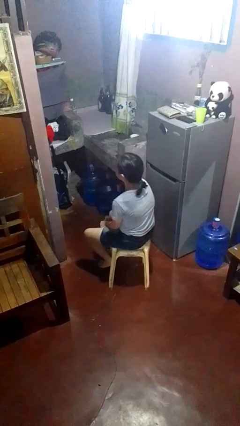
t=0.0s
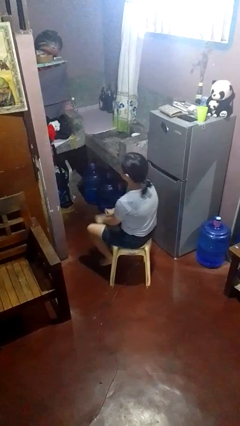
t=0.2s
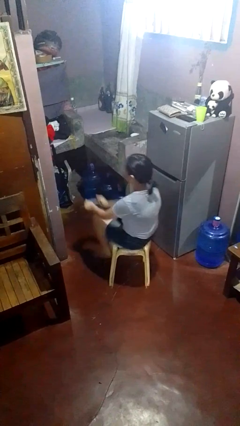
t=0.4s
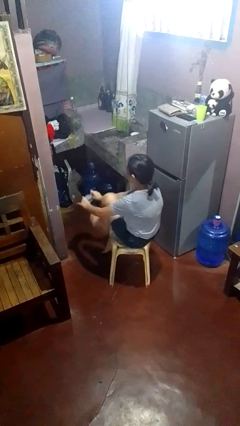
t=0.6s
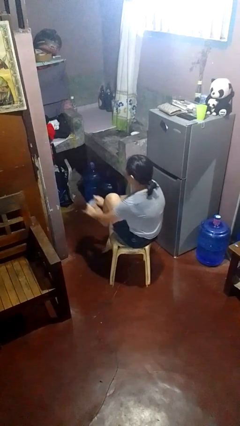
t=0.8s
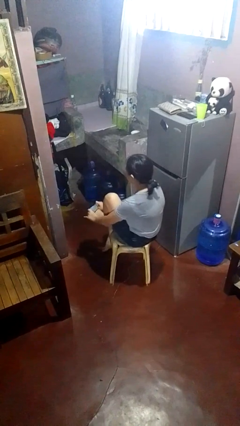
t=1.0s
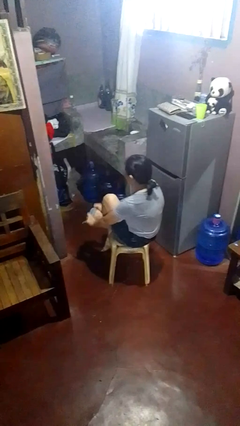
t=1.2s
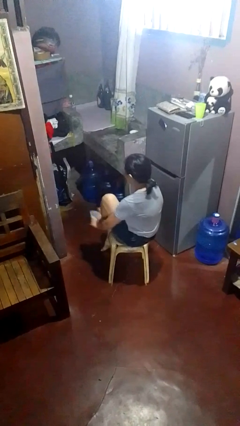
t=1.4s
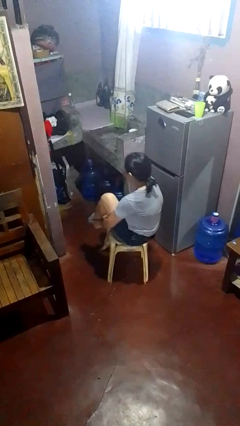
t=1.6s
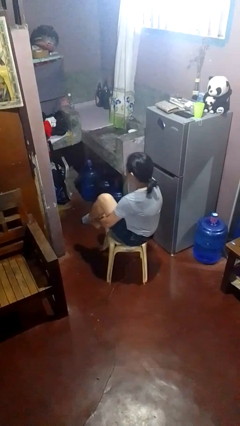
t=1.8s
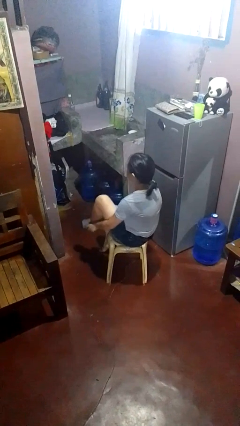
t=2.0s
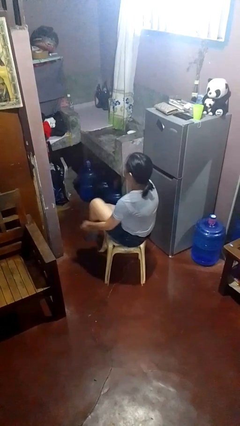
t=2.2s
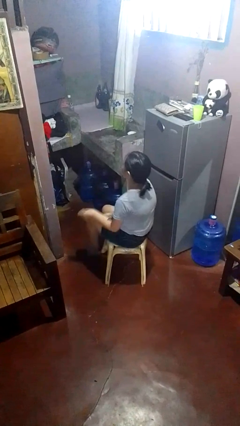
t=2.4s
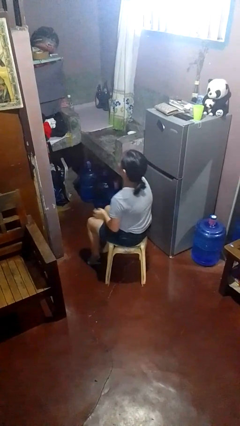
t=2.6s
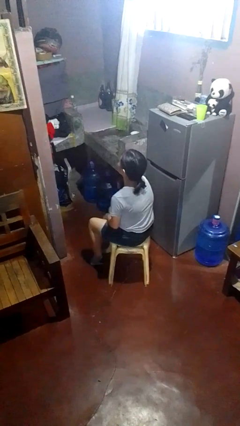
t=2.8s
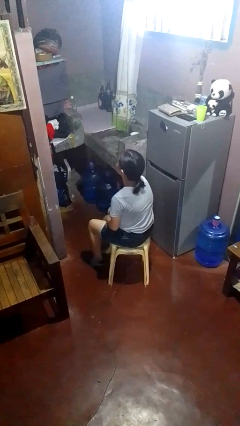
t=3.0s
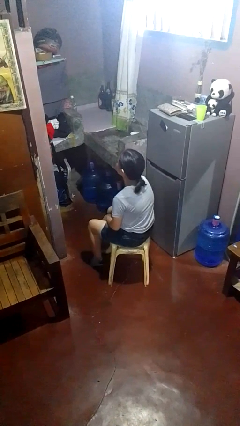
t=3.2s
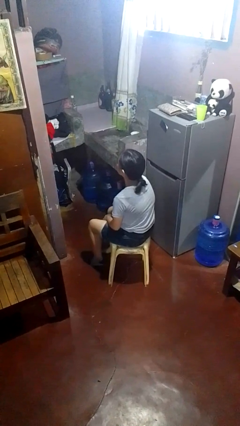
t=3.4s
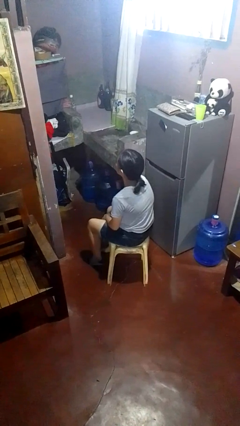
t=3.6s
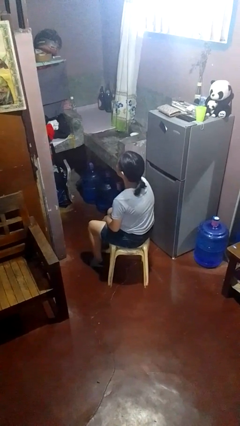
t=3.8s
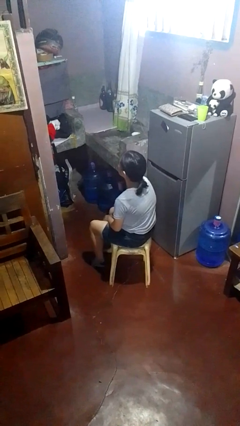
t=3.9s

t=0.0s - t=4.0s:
person puts on socks

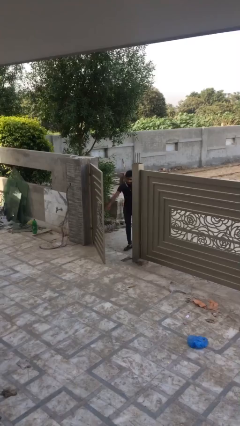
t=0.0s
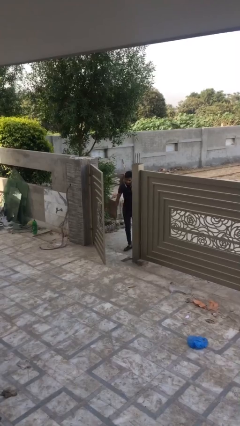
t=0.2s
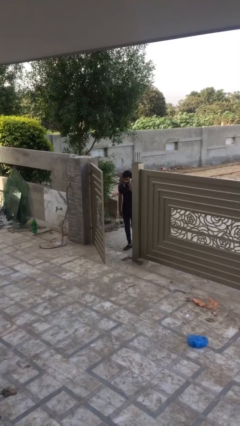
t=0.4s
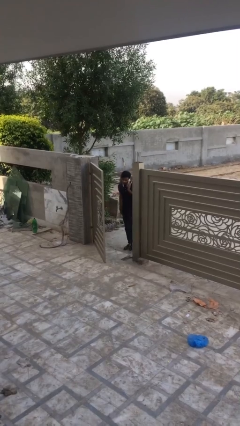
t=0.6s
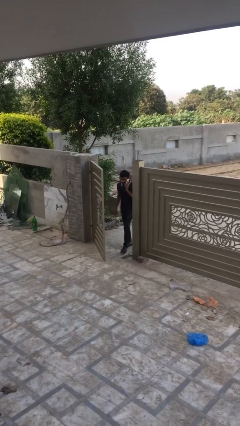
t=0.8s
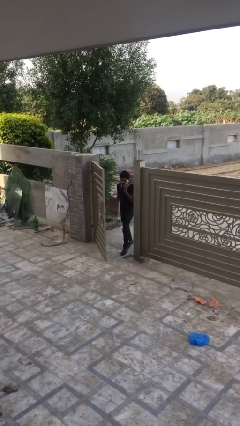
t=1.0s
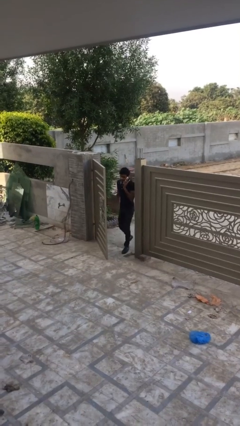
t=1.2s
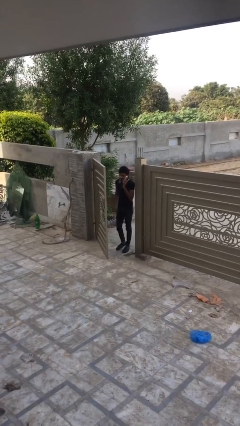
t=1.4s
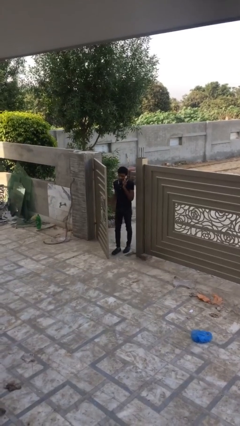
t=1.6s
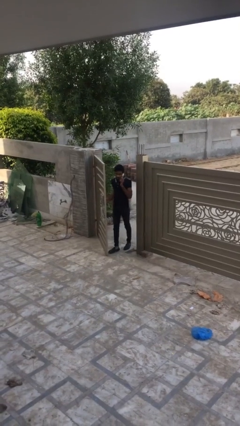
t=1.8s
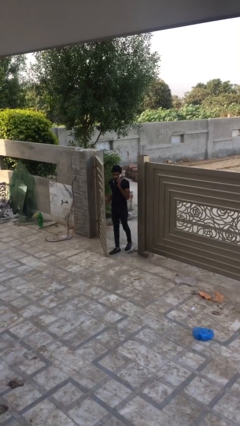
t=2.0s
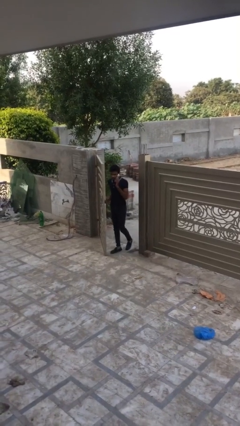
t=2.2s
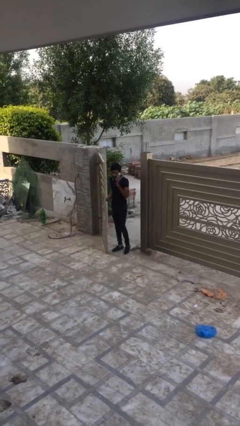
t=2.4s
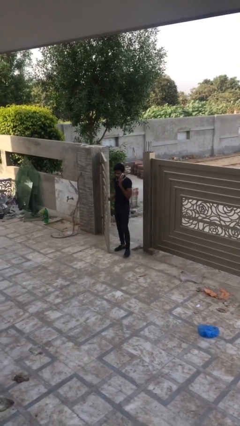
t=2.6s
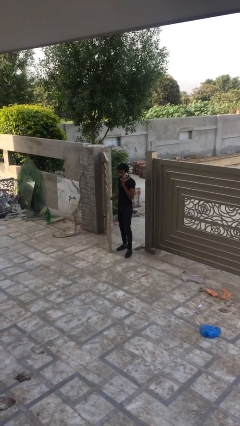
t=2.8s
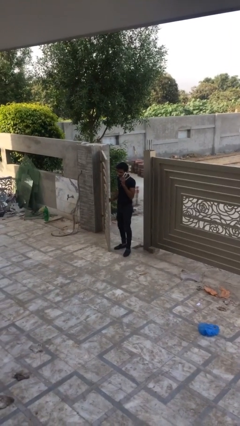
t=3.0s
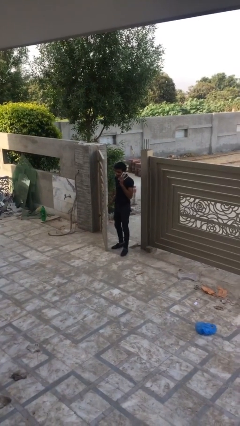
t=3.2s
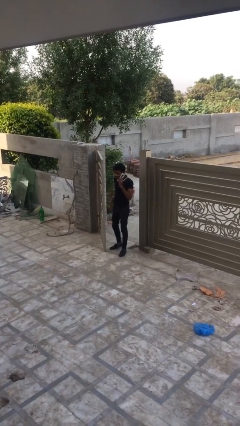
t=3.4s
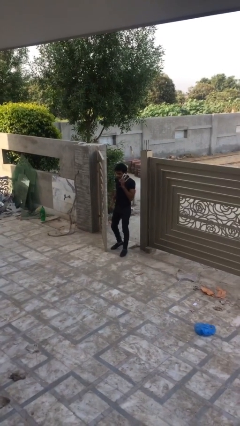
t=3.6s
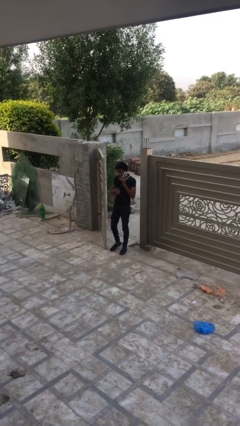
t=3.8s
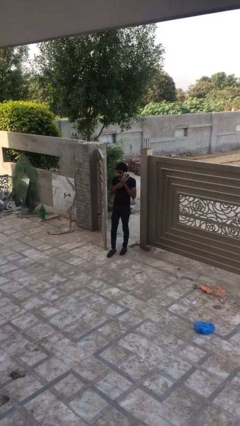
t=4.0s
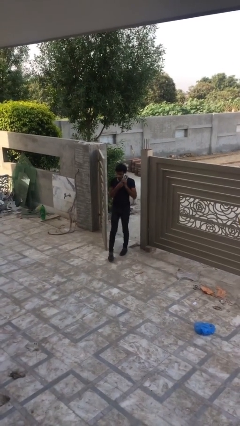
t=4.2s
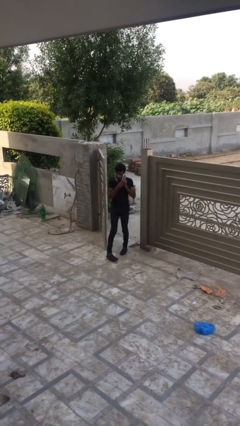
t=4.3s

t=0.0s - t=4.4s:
person enters scene through structure

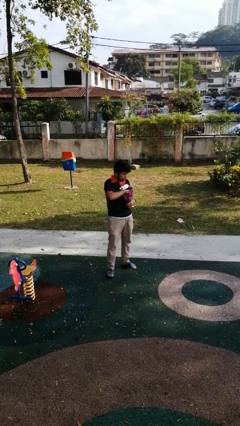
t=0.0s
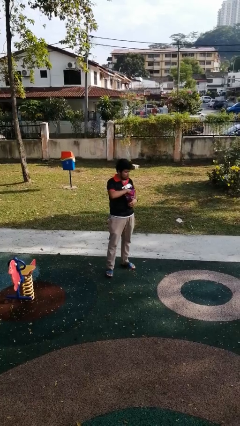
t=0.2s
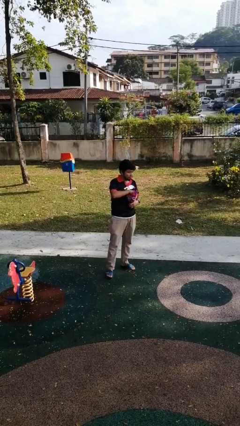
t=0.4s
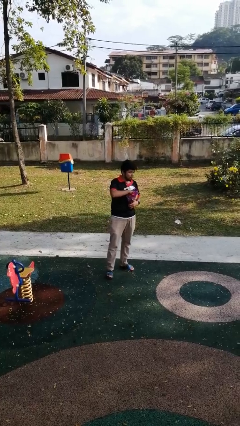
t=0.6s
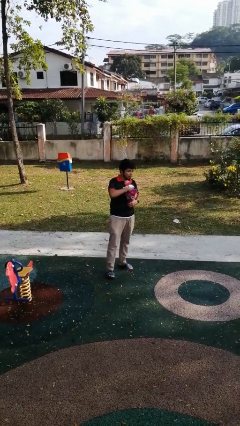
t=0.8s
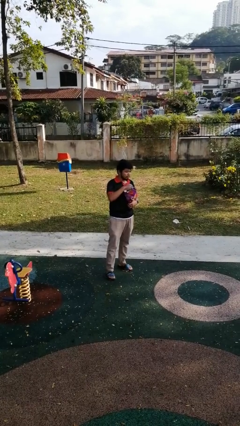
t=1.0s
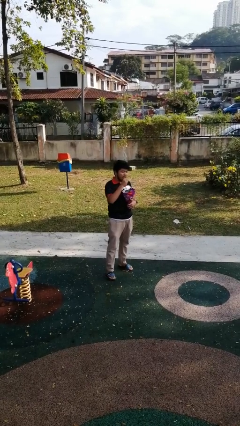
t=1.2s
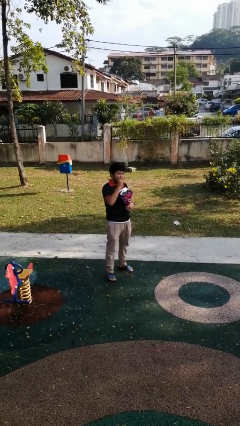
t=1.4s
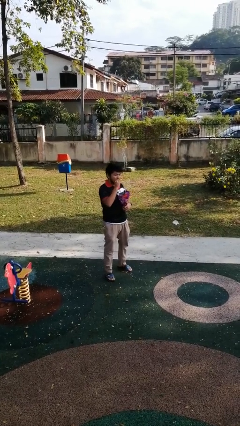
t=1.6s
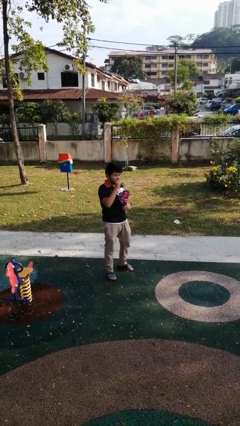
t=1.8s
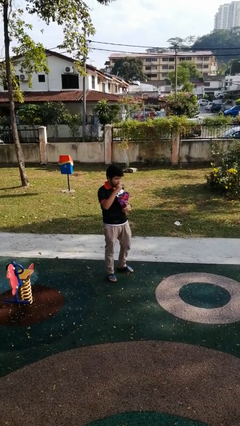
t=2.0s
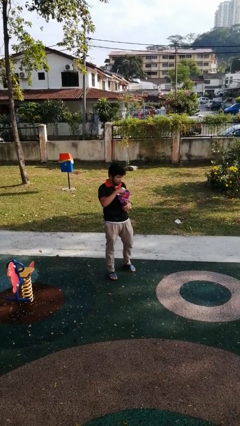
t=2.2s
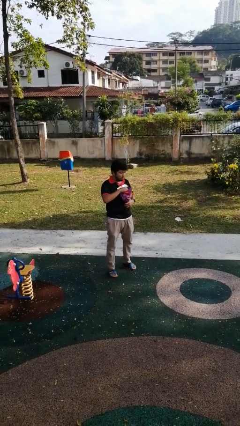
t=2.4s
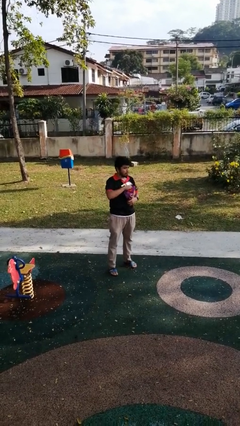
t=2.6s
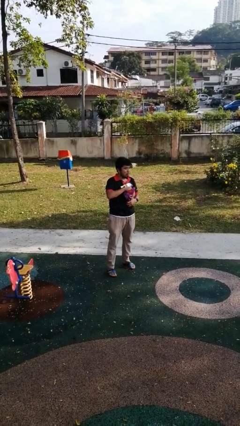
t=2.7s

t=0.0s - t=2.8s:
person eats snack from bag

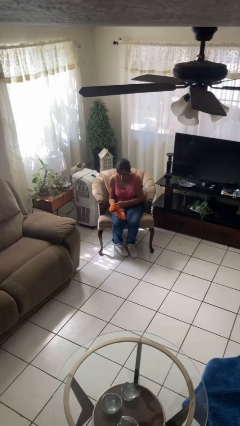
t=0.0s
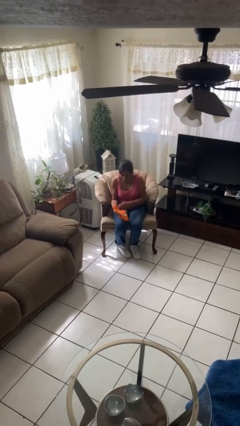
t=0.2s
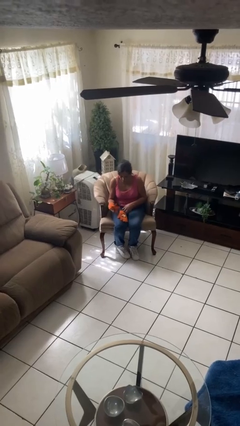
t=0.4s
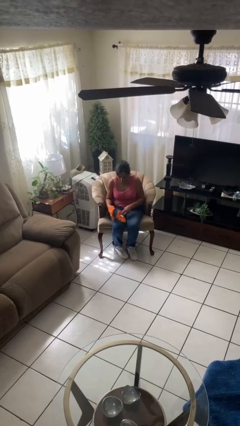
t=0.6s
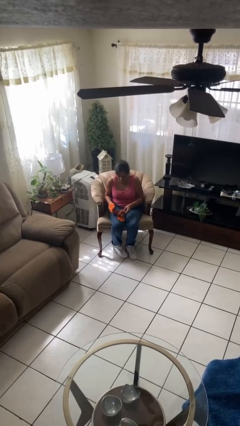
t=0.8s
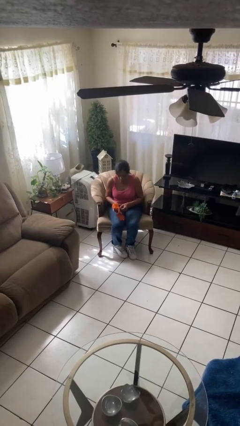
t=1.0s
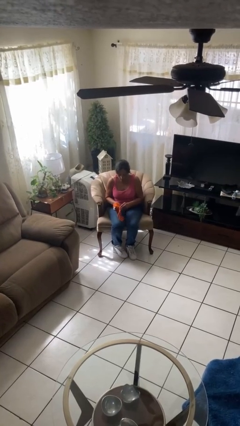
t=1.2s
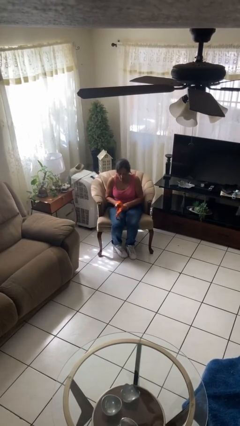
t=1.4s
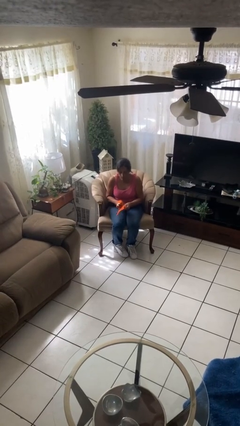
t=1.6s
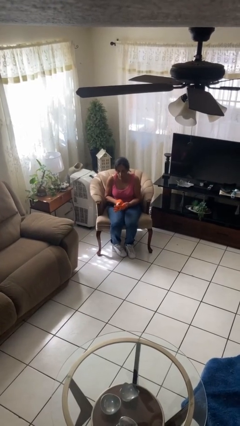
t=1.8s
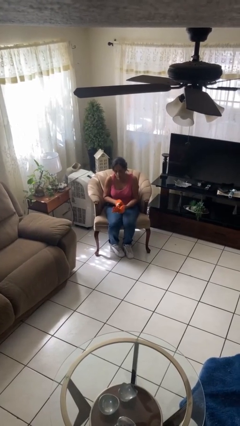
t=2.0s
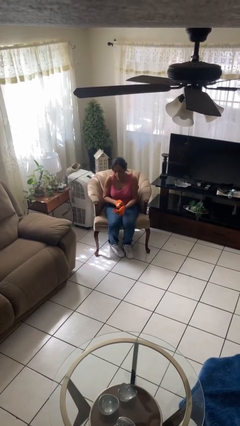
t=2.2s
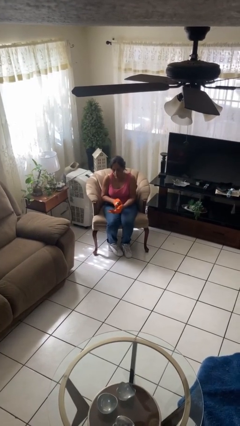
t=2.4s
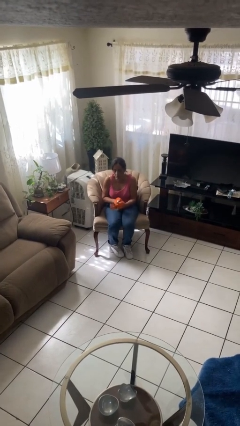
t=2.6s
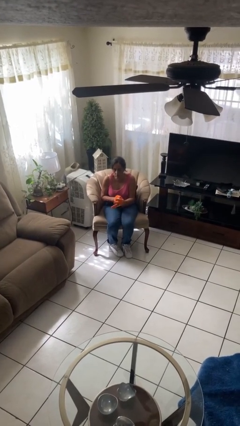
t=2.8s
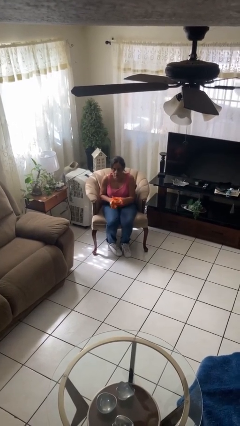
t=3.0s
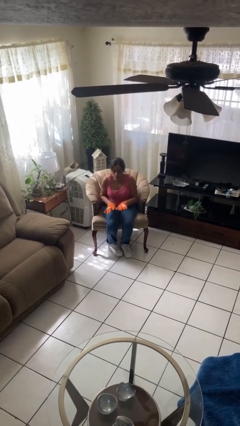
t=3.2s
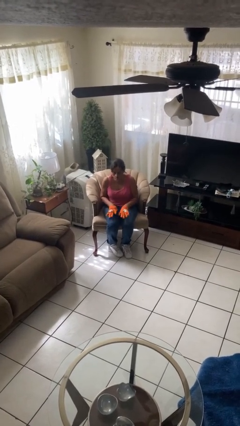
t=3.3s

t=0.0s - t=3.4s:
person puts on gloves

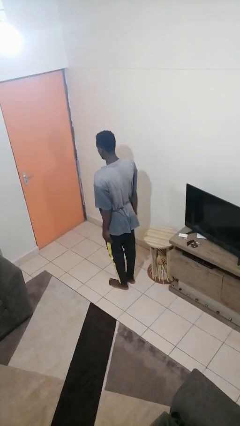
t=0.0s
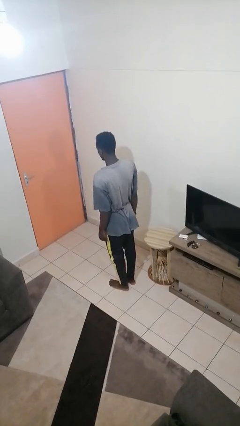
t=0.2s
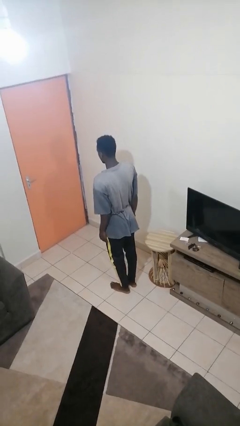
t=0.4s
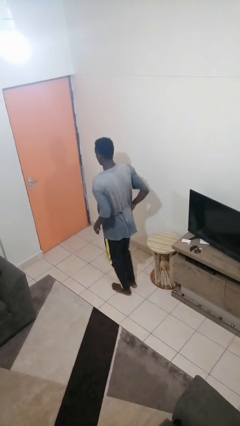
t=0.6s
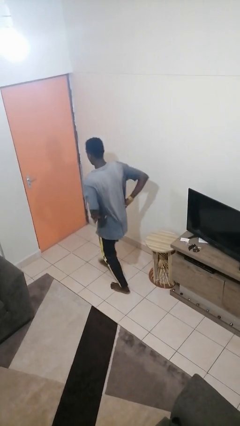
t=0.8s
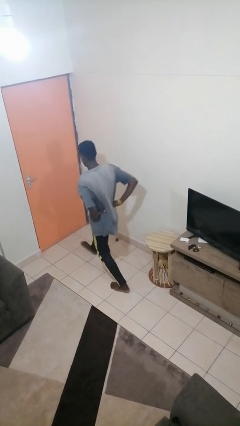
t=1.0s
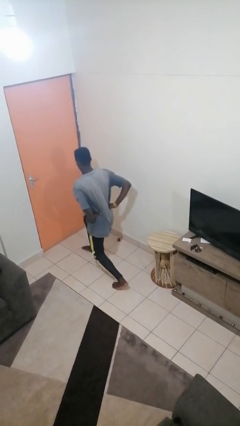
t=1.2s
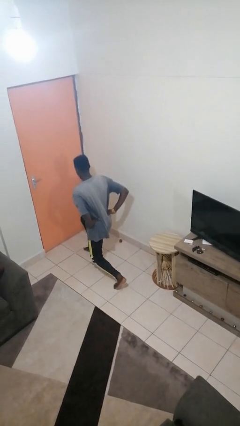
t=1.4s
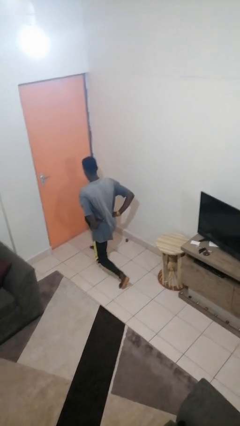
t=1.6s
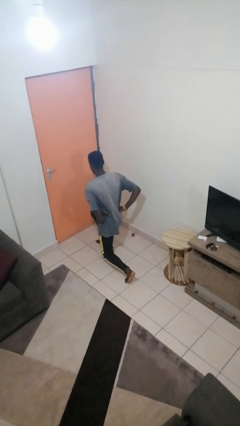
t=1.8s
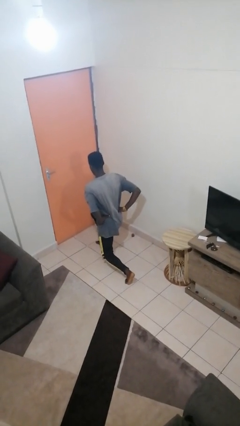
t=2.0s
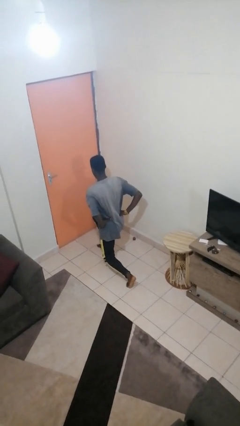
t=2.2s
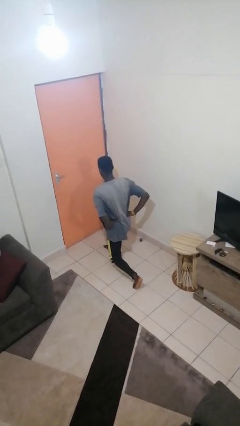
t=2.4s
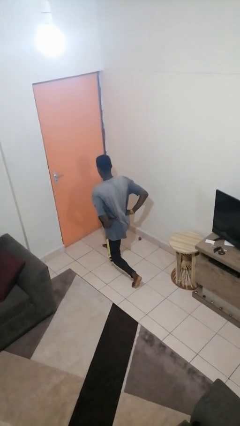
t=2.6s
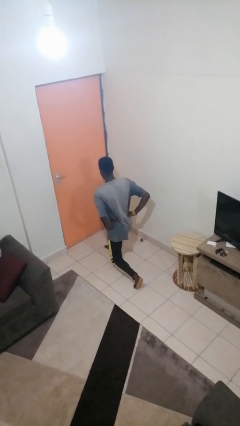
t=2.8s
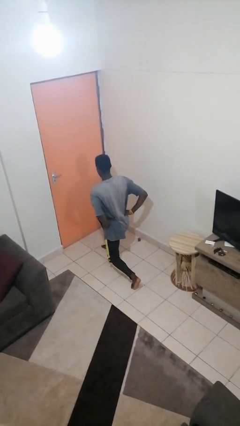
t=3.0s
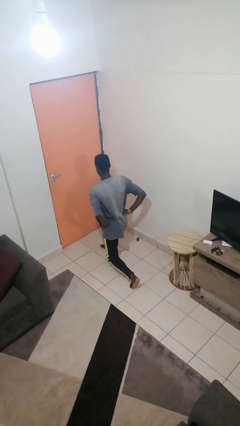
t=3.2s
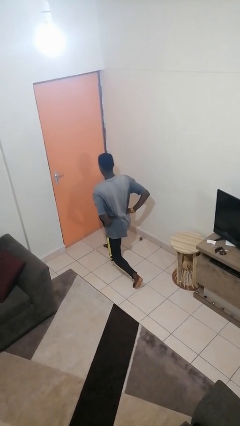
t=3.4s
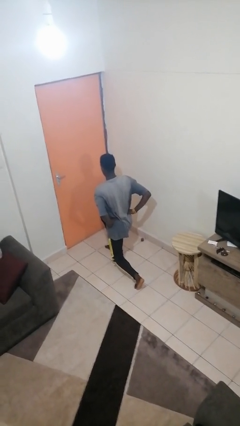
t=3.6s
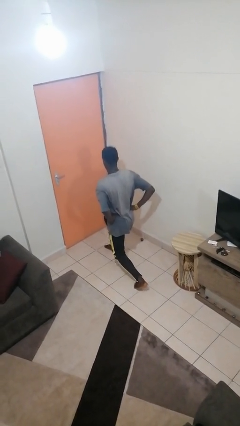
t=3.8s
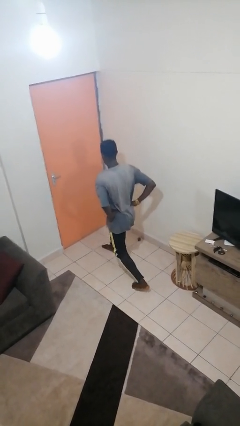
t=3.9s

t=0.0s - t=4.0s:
person exercises with lunges
